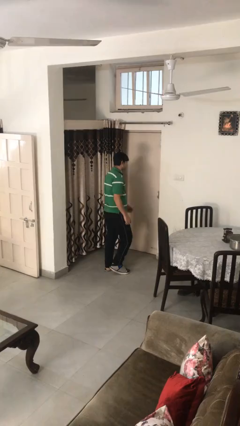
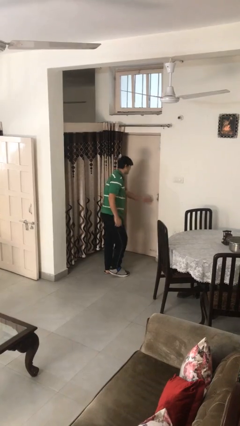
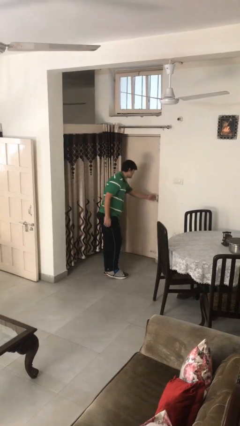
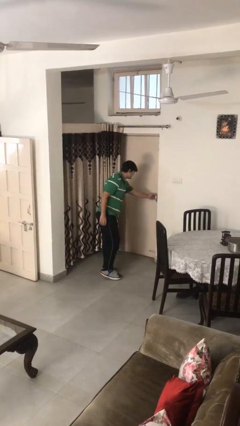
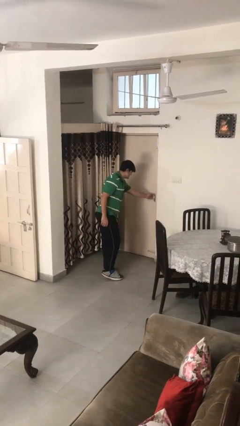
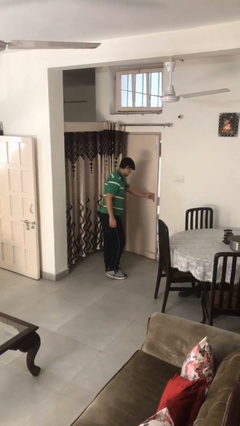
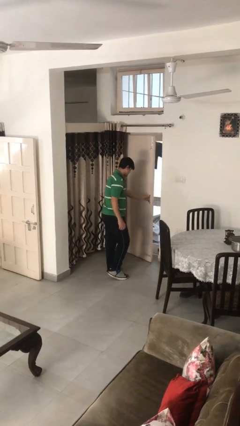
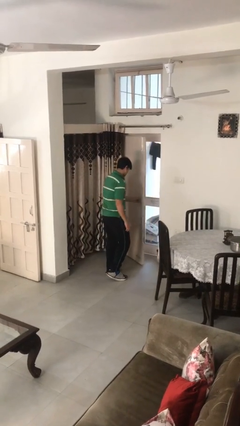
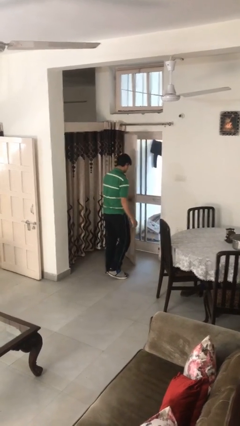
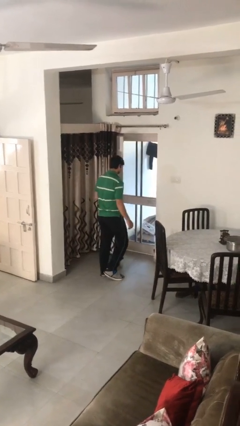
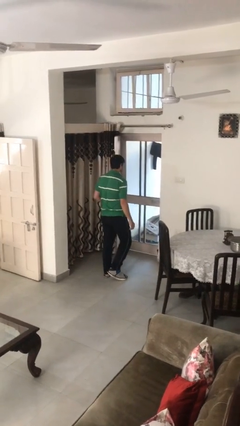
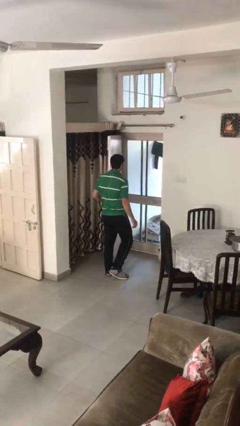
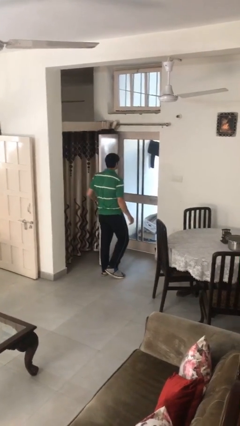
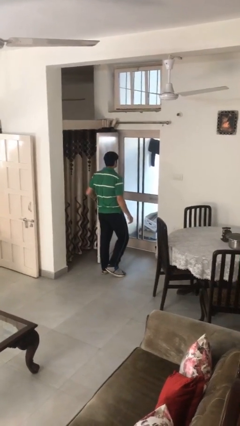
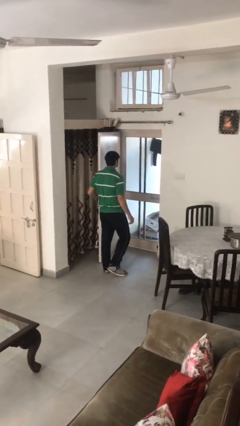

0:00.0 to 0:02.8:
person opens facility door

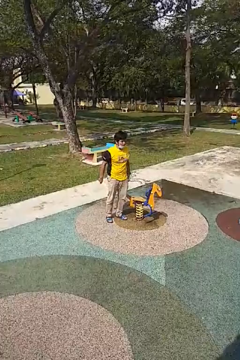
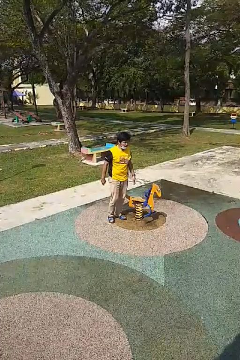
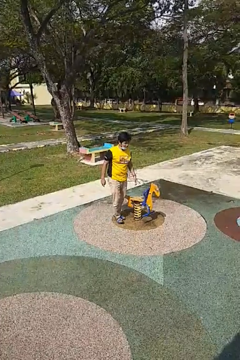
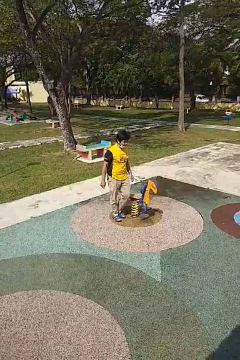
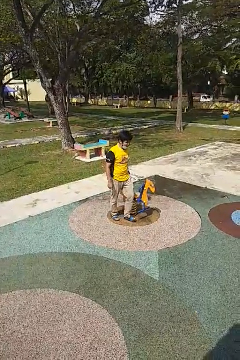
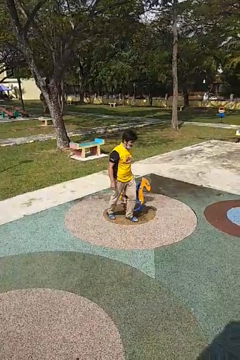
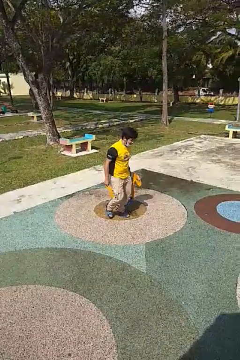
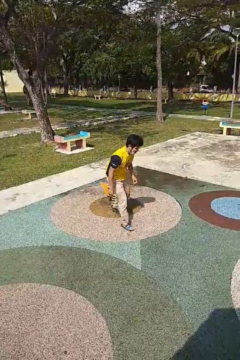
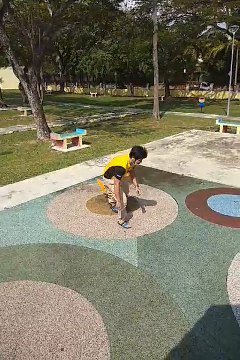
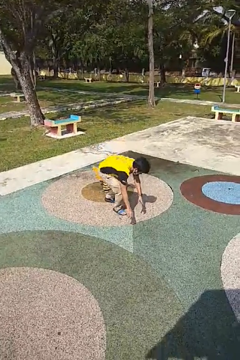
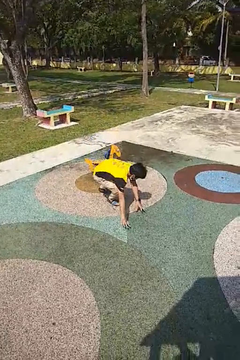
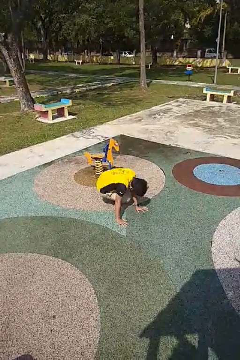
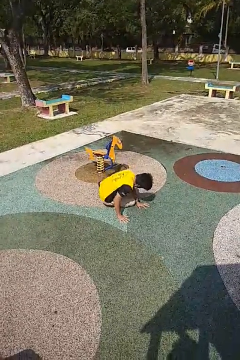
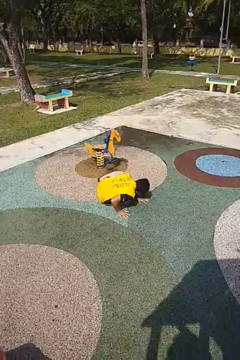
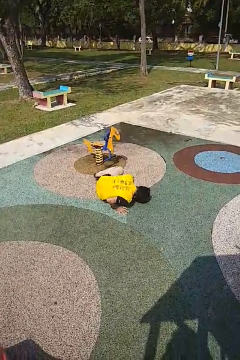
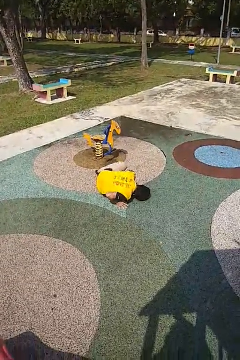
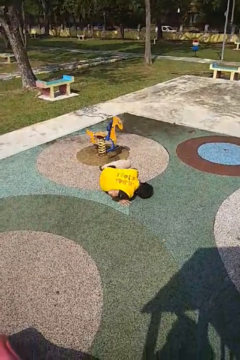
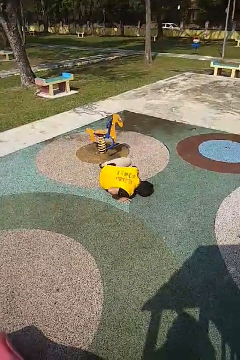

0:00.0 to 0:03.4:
person trips on object on floor

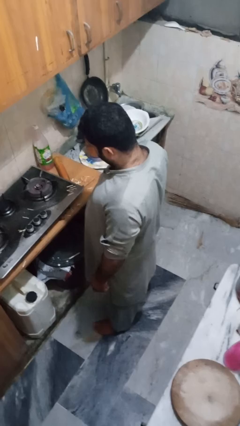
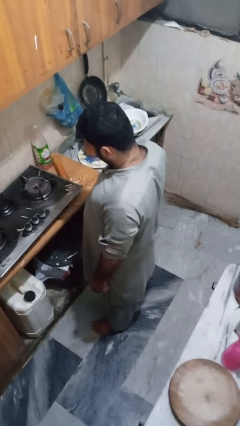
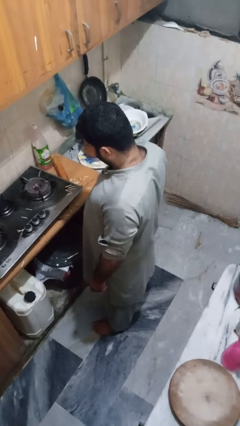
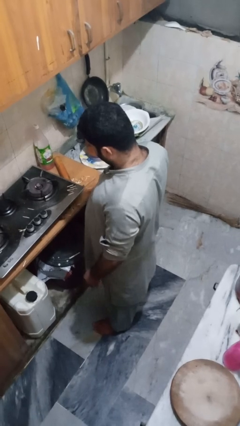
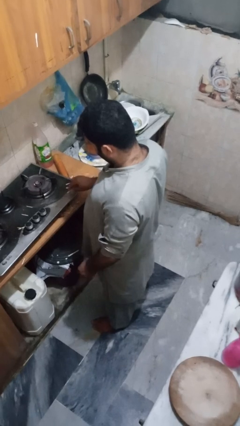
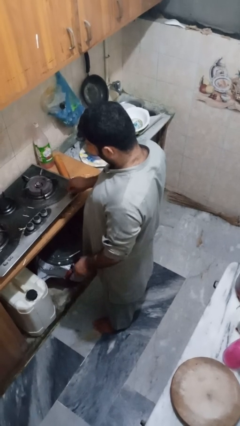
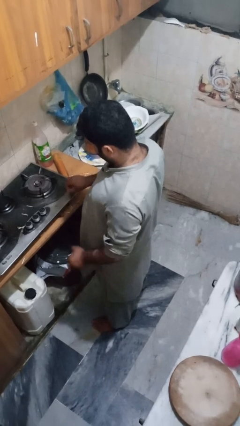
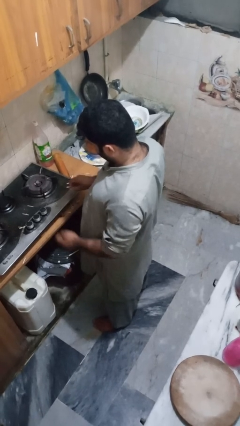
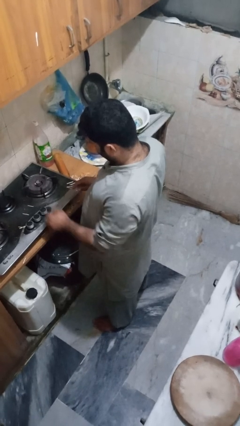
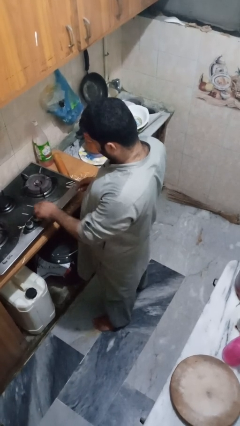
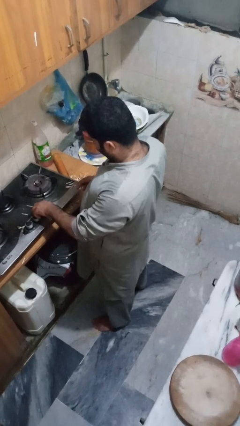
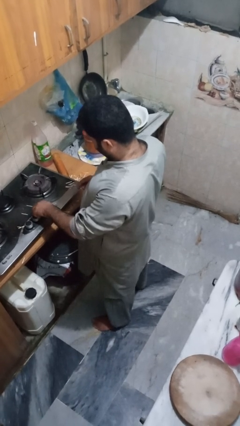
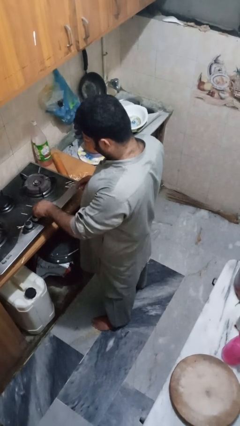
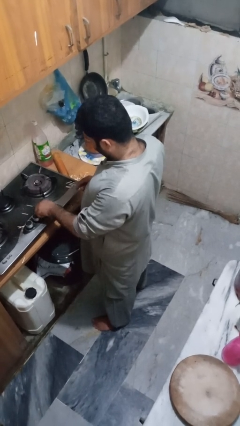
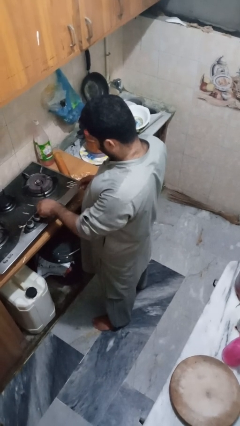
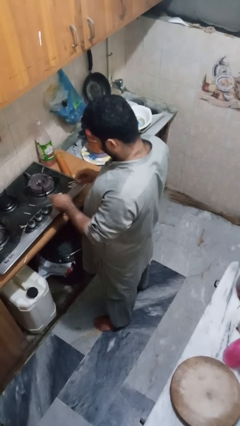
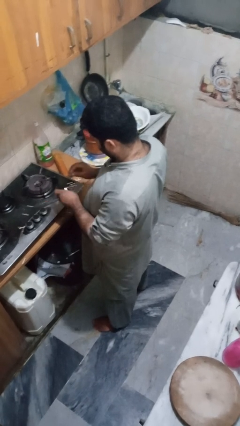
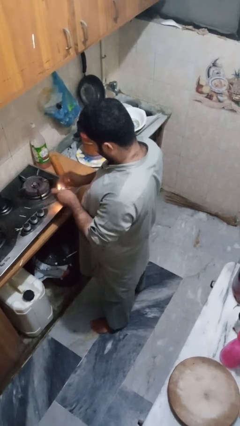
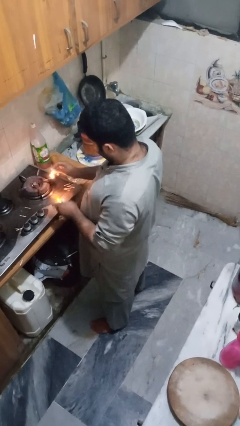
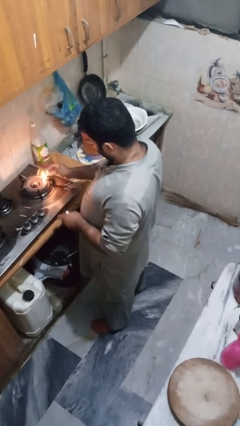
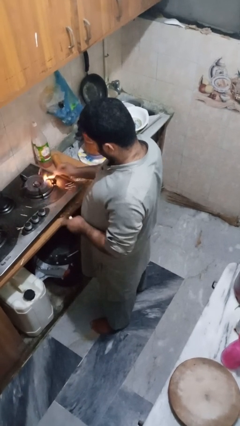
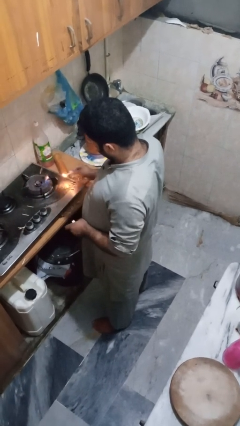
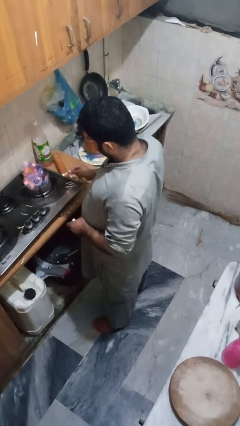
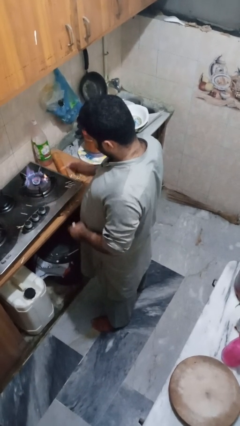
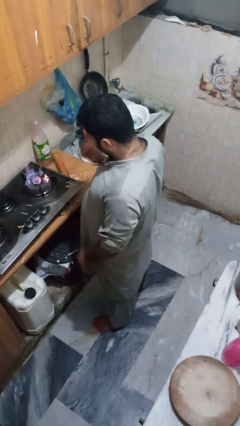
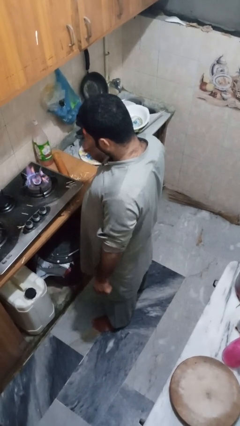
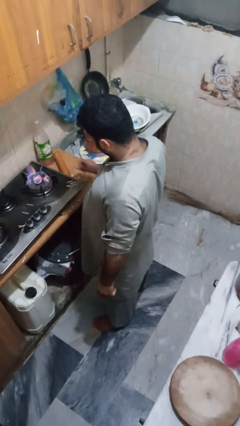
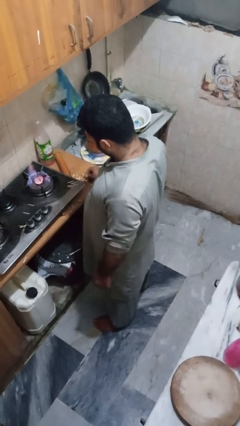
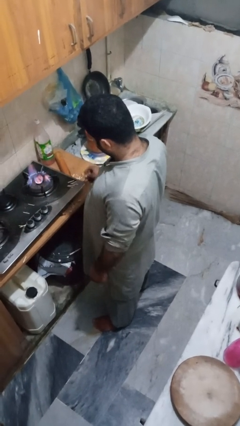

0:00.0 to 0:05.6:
person turns on stovetop

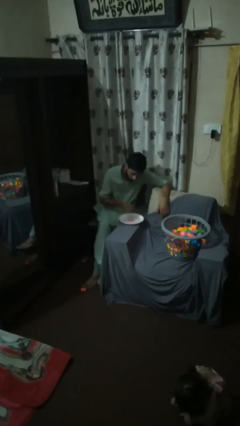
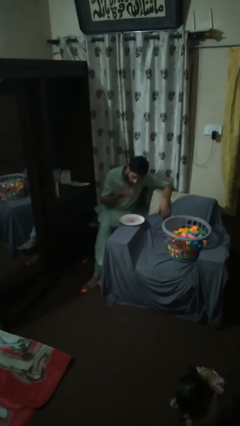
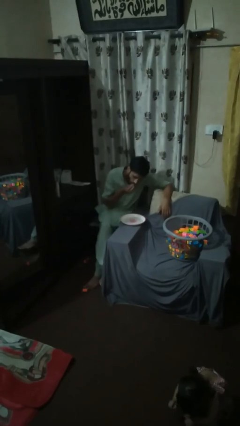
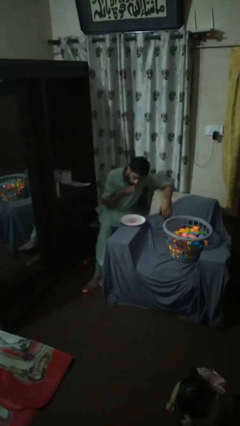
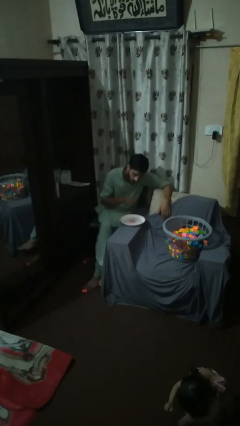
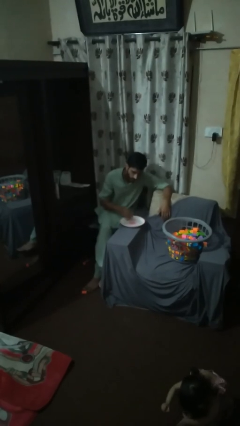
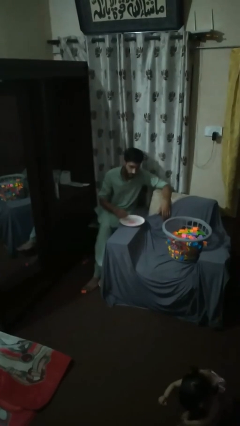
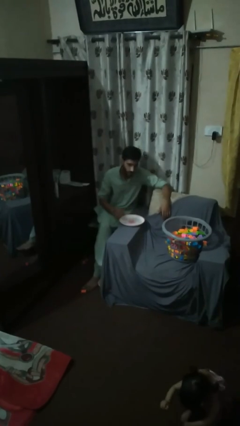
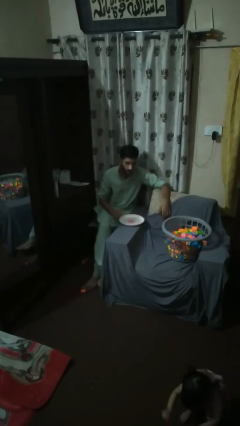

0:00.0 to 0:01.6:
person eats with hands

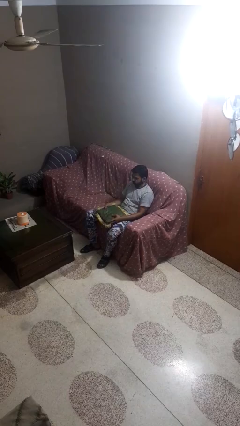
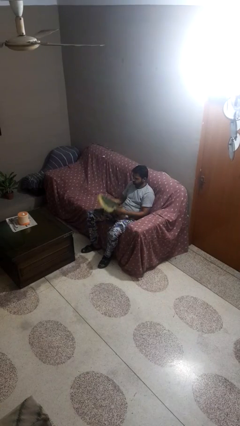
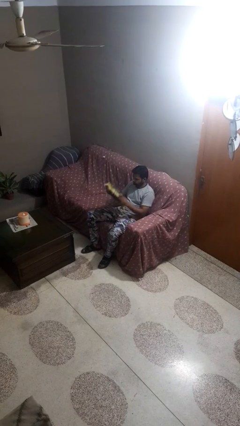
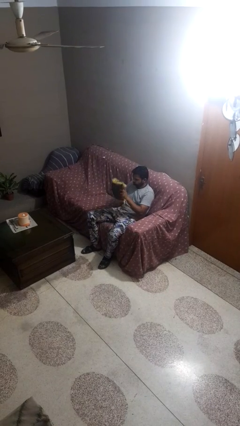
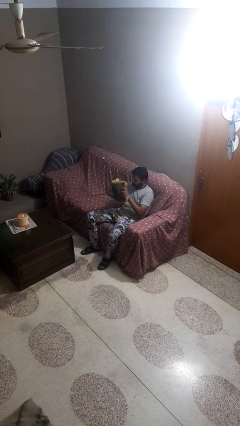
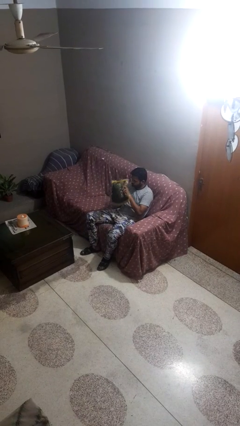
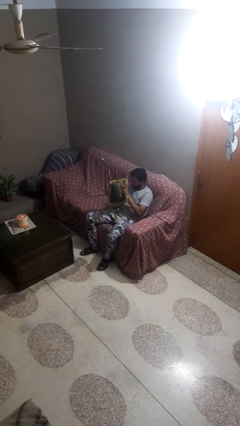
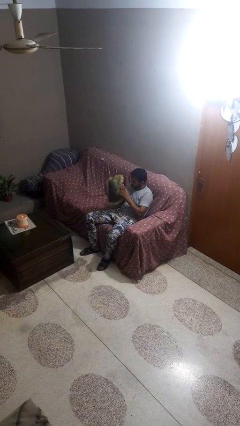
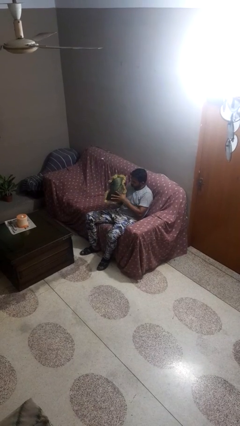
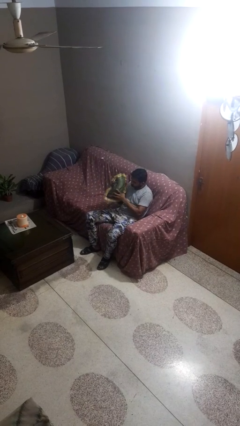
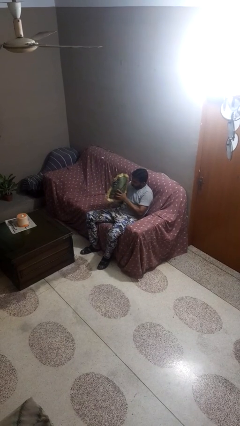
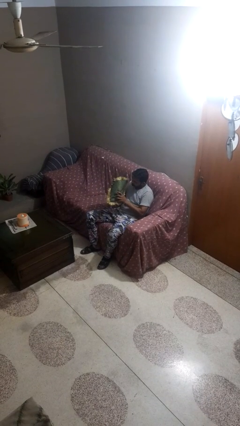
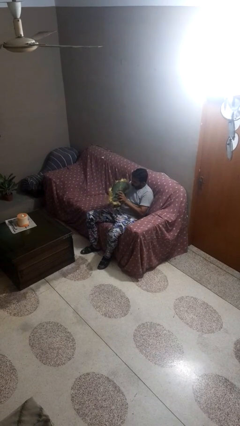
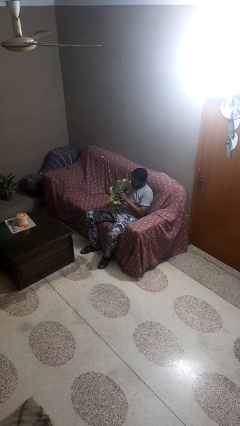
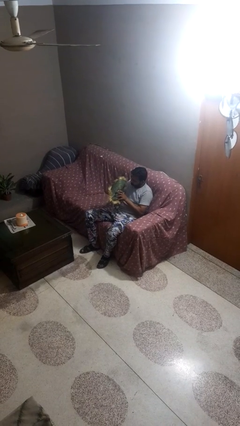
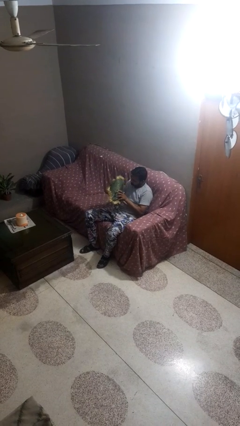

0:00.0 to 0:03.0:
person squeezes object

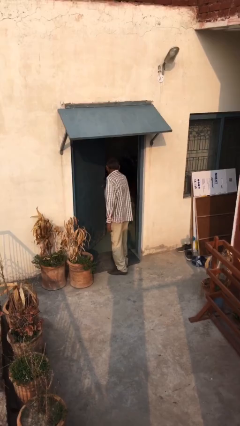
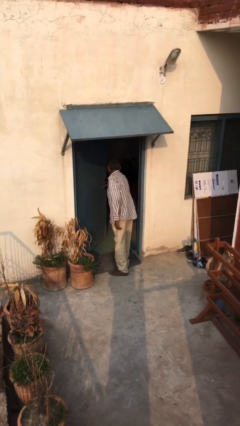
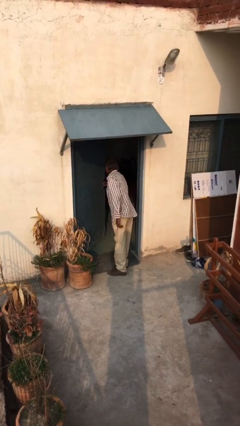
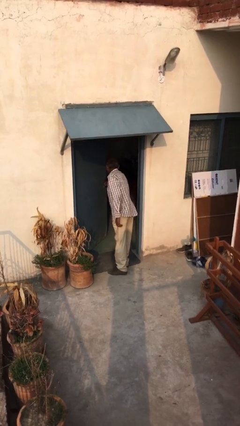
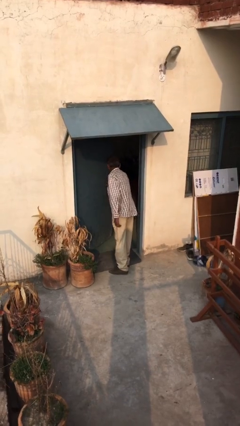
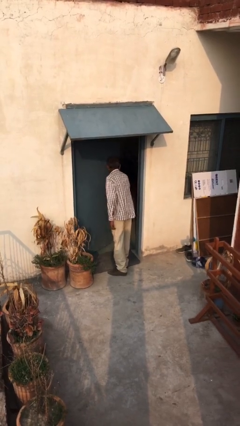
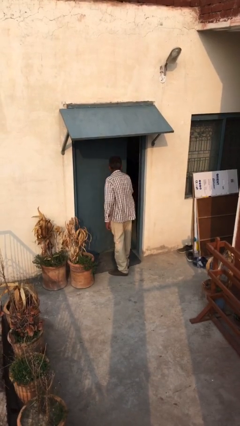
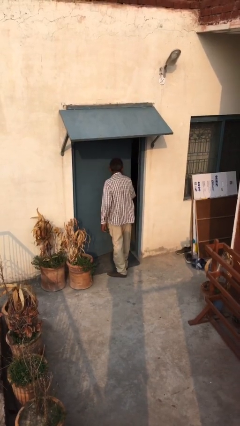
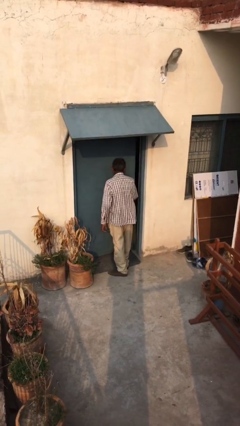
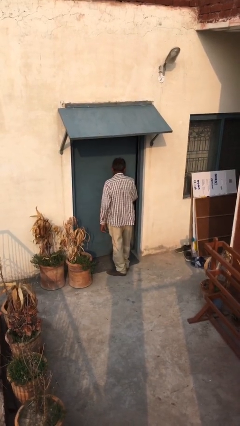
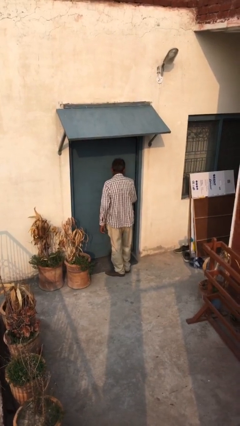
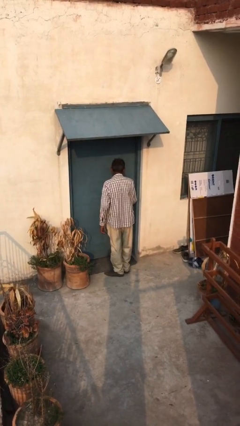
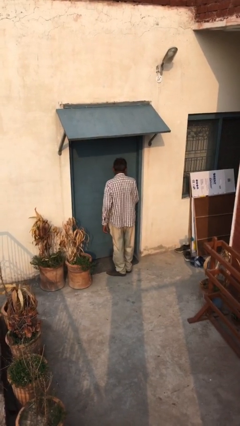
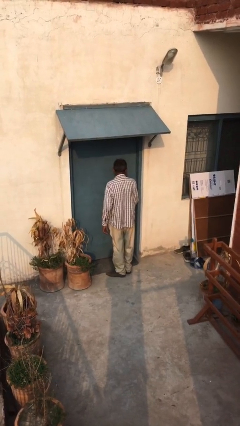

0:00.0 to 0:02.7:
person closes facility door
